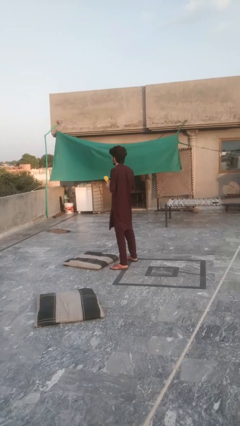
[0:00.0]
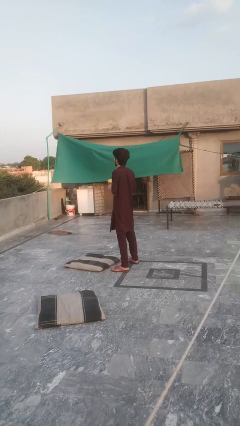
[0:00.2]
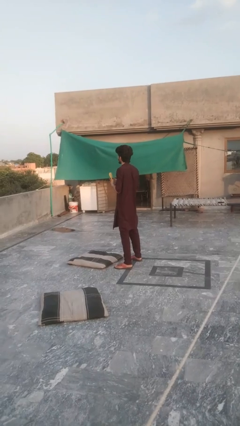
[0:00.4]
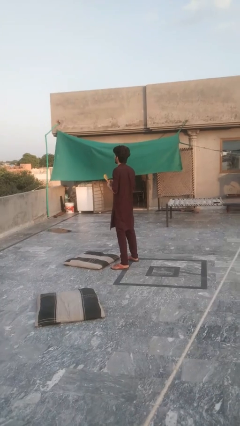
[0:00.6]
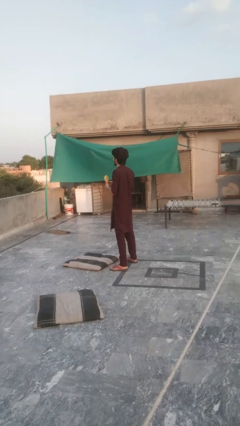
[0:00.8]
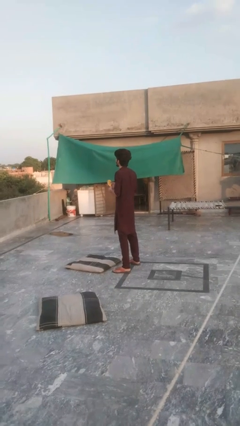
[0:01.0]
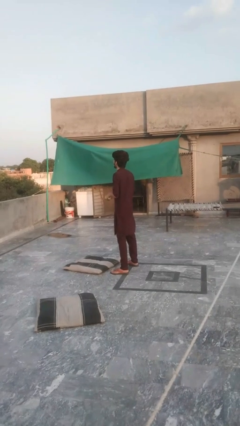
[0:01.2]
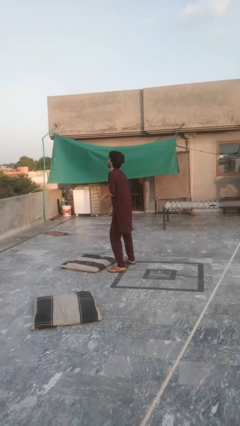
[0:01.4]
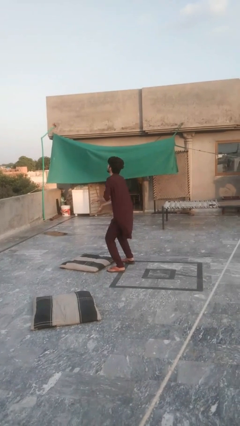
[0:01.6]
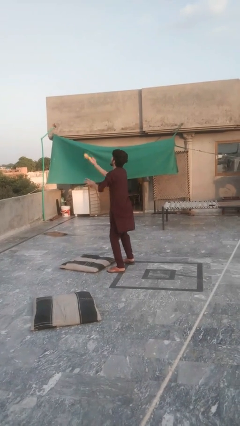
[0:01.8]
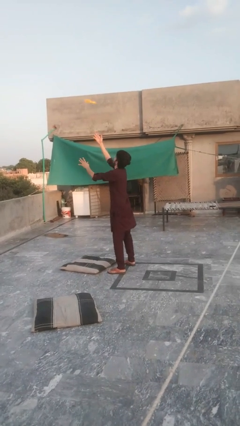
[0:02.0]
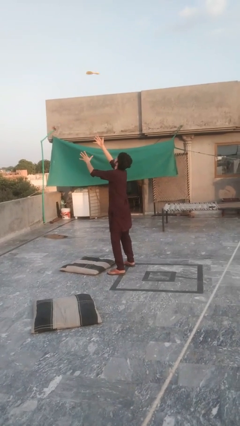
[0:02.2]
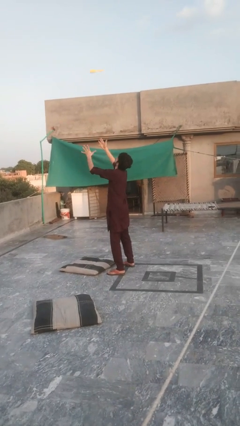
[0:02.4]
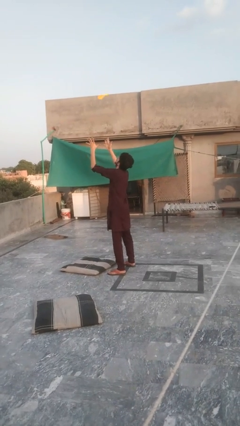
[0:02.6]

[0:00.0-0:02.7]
person drops object

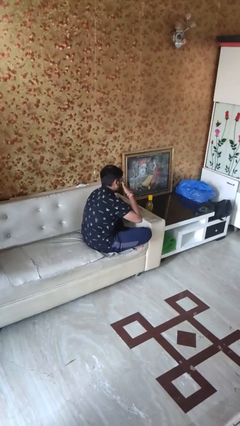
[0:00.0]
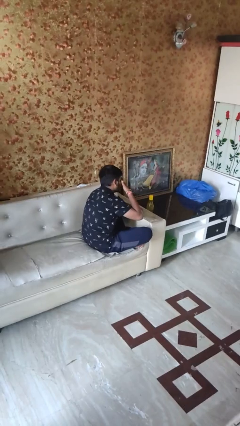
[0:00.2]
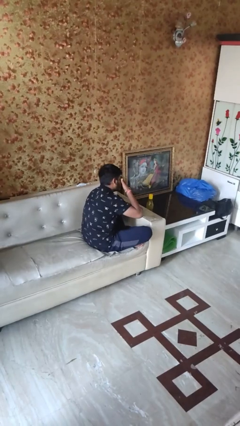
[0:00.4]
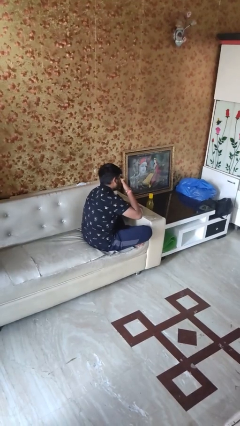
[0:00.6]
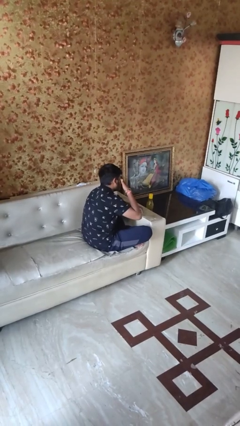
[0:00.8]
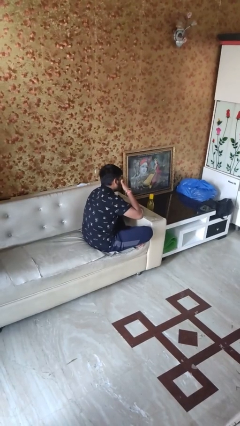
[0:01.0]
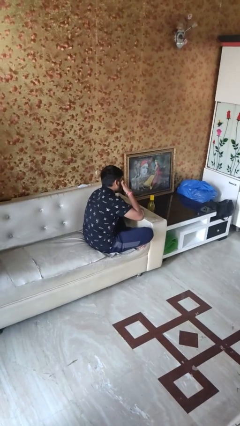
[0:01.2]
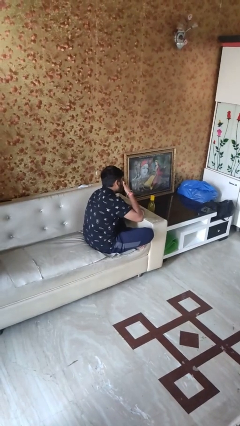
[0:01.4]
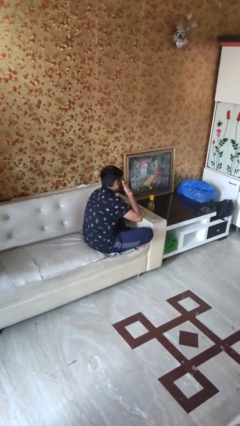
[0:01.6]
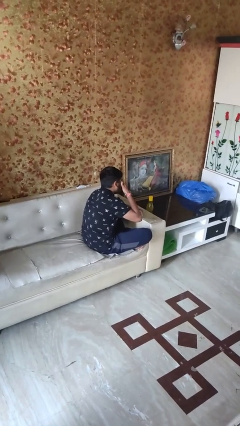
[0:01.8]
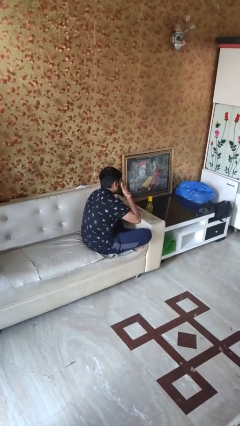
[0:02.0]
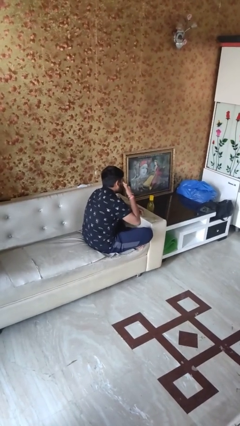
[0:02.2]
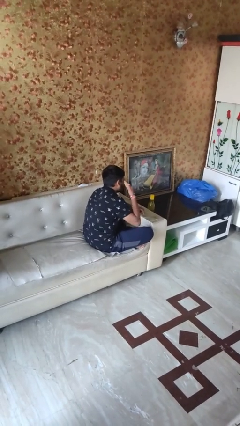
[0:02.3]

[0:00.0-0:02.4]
person rubs eyes

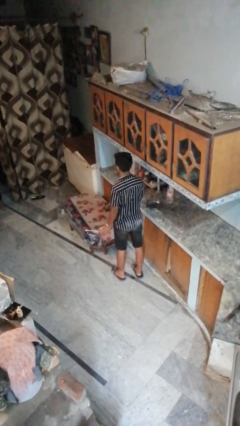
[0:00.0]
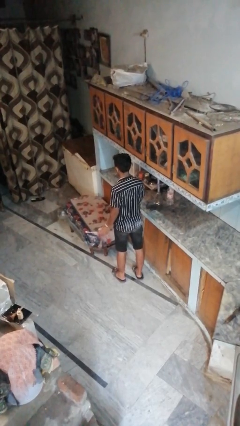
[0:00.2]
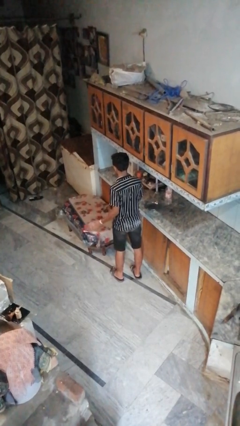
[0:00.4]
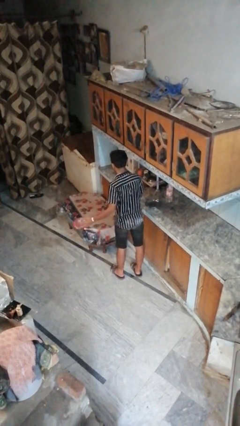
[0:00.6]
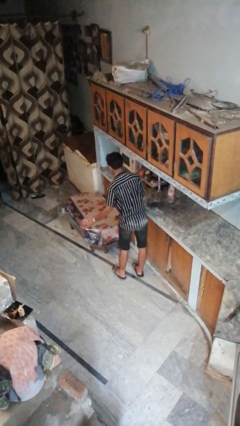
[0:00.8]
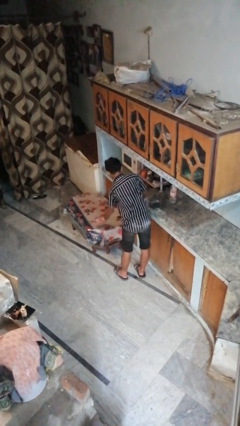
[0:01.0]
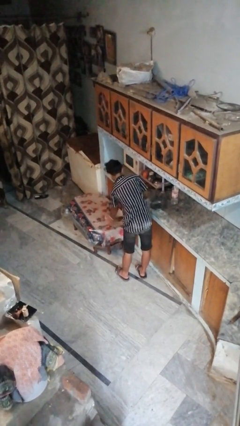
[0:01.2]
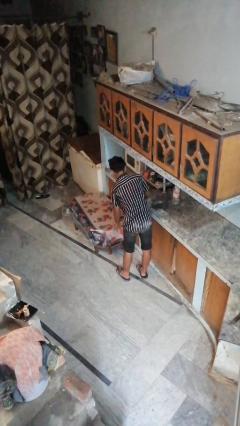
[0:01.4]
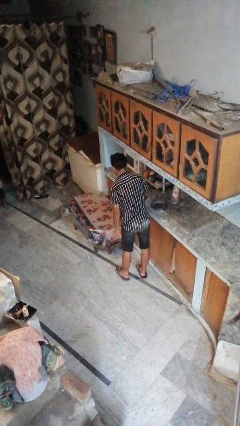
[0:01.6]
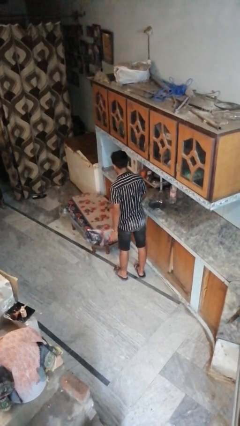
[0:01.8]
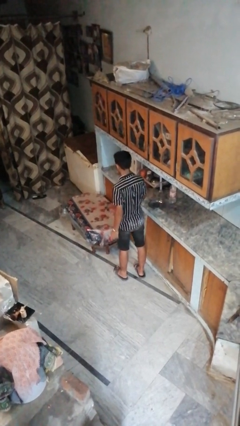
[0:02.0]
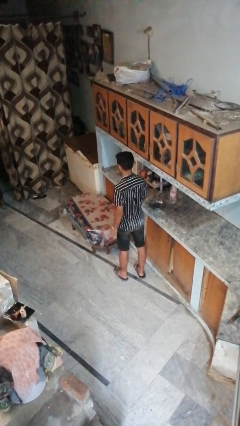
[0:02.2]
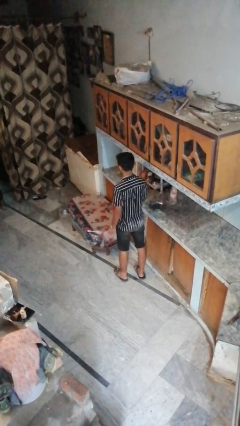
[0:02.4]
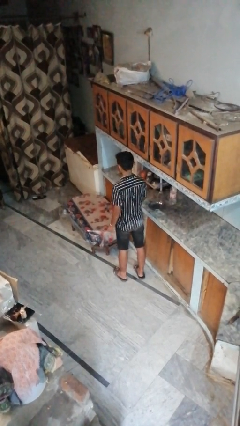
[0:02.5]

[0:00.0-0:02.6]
person throws object on table

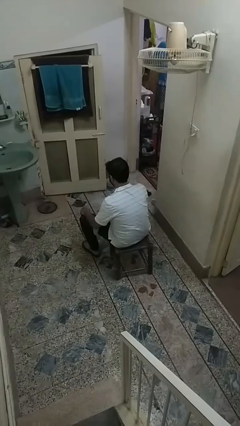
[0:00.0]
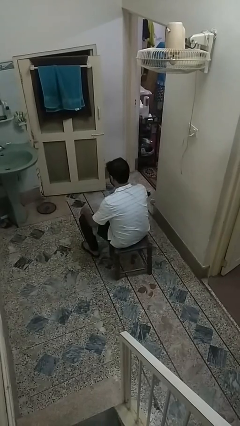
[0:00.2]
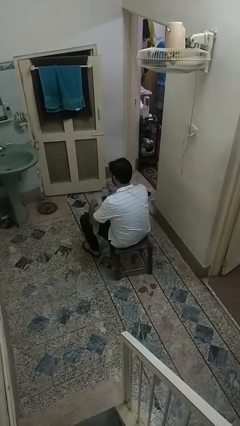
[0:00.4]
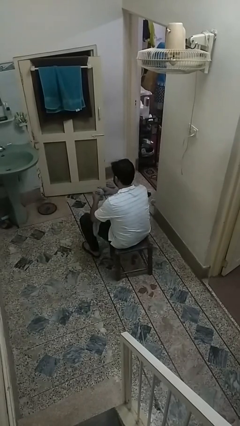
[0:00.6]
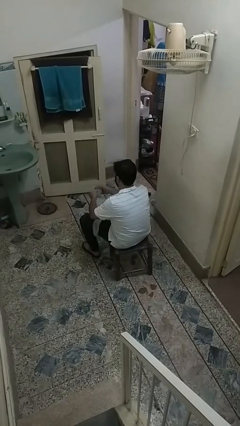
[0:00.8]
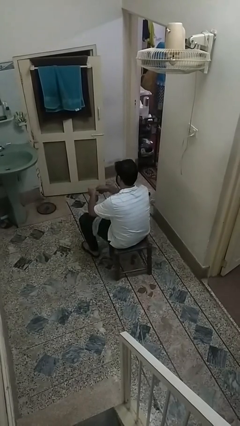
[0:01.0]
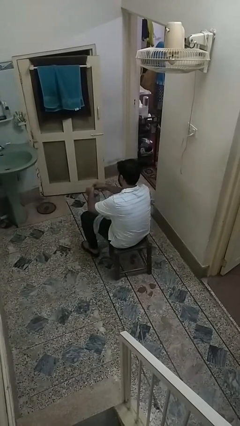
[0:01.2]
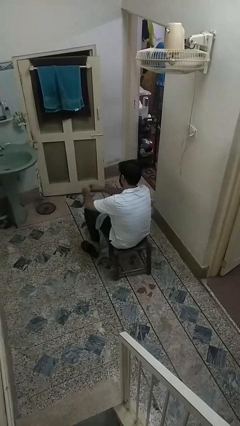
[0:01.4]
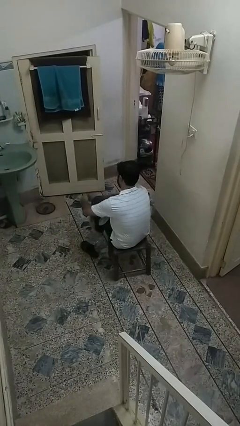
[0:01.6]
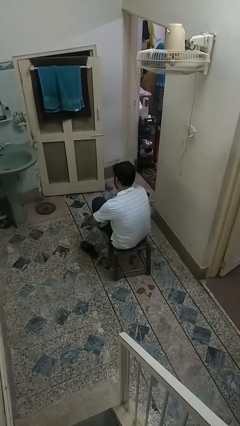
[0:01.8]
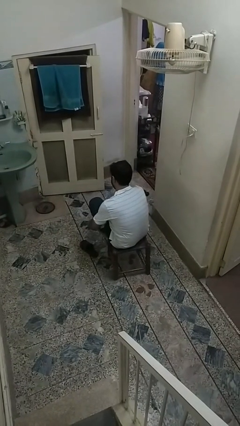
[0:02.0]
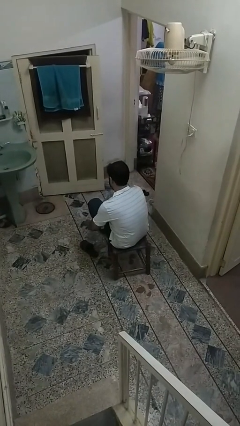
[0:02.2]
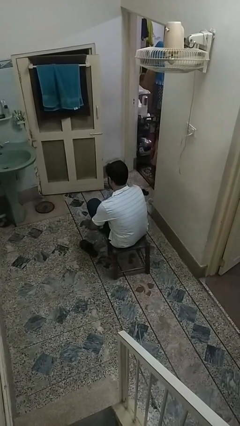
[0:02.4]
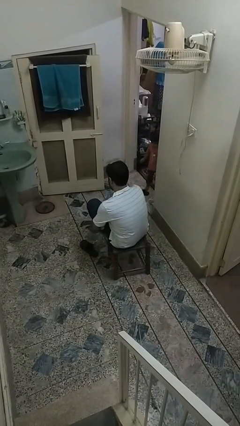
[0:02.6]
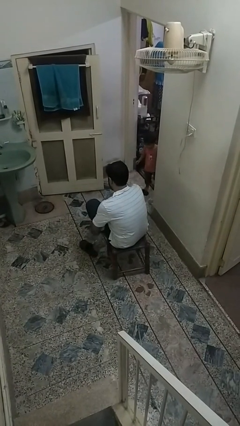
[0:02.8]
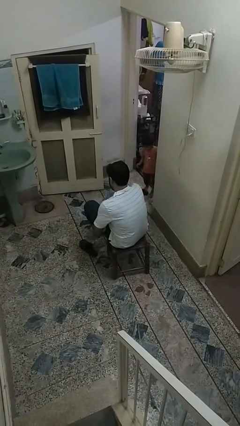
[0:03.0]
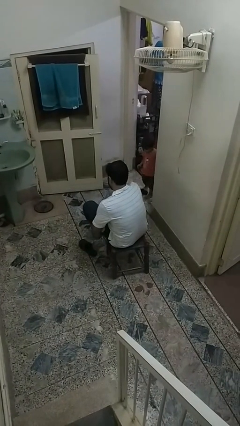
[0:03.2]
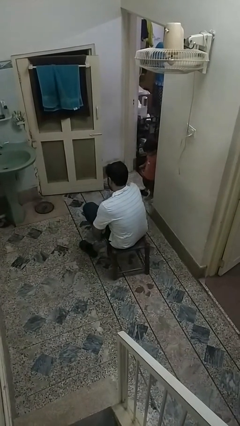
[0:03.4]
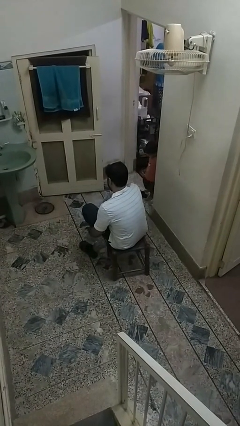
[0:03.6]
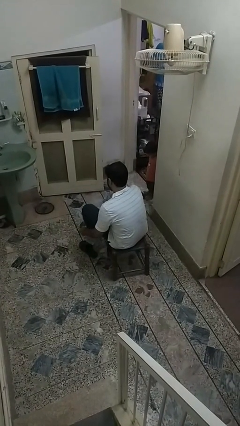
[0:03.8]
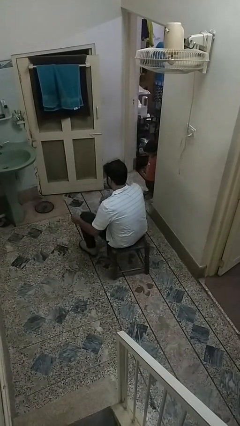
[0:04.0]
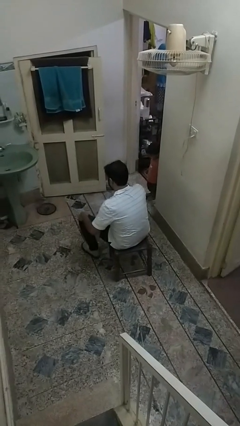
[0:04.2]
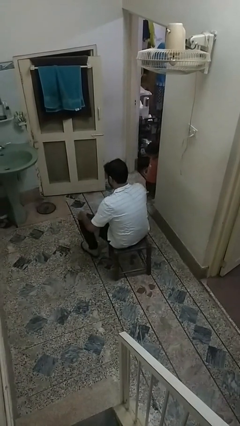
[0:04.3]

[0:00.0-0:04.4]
person puts on socks

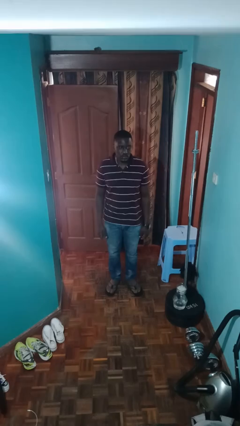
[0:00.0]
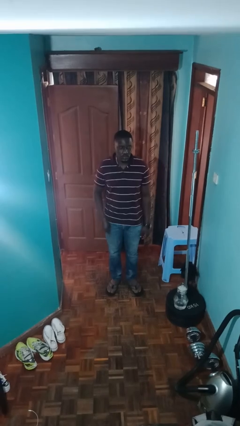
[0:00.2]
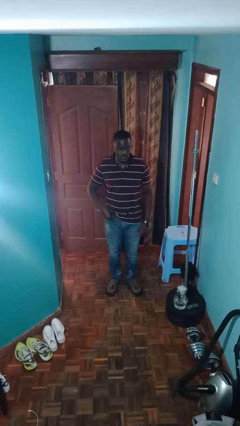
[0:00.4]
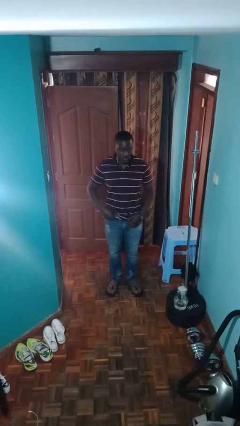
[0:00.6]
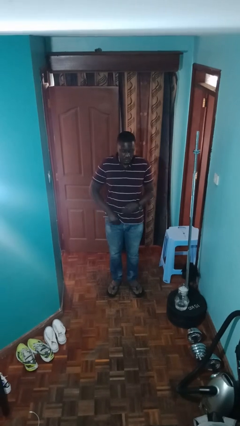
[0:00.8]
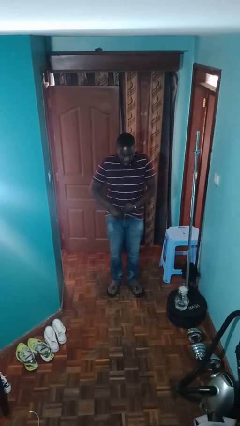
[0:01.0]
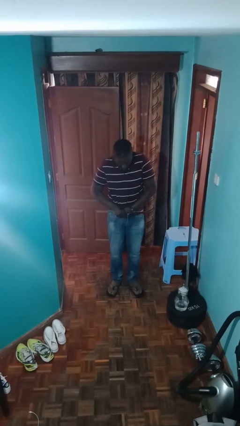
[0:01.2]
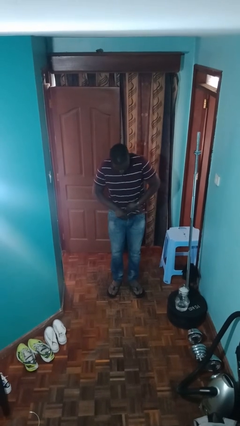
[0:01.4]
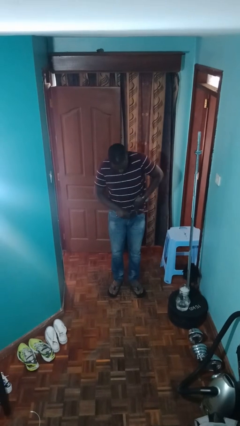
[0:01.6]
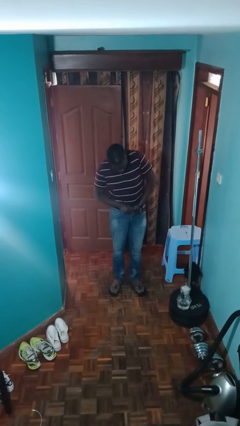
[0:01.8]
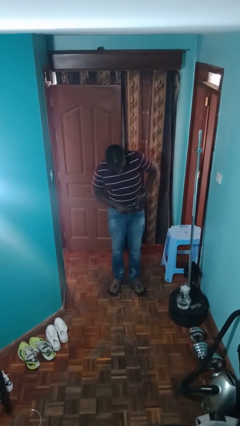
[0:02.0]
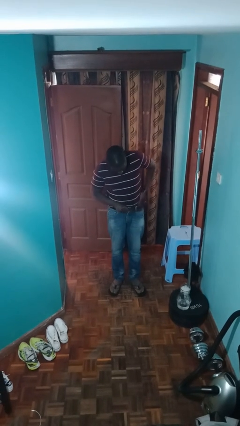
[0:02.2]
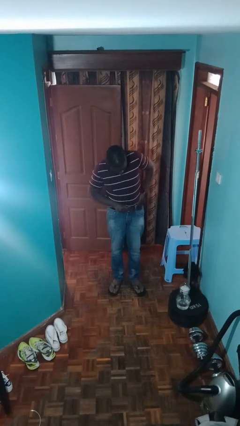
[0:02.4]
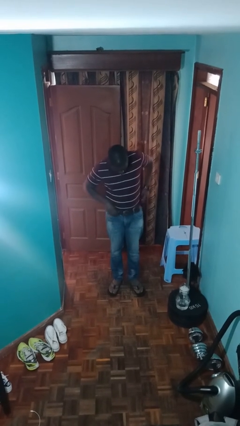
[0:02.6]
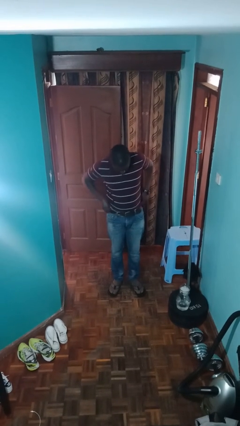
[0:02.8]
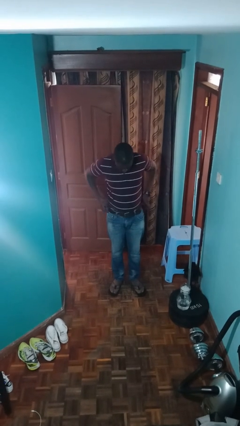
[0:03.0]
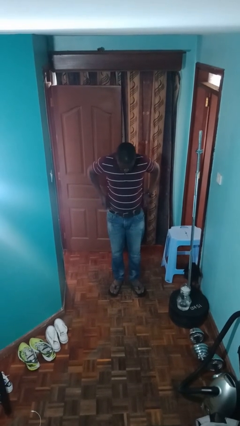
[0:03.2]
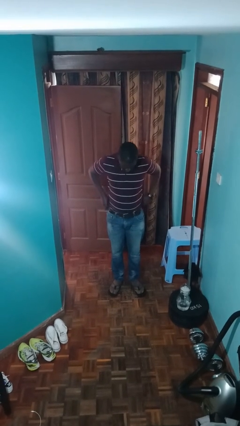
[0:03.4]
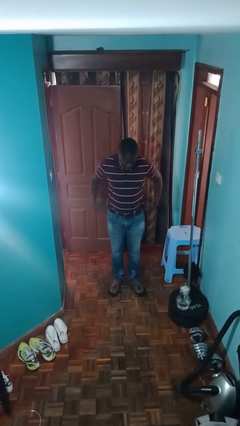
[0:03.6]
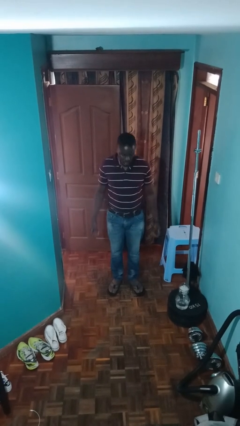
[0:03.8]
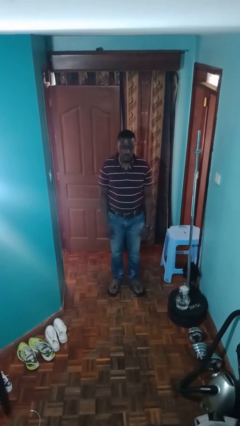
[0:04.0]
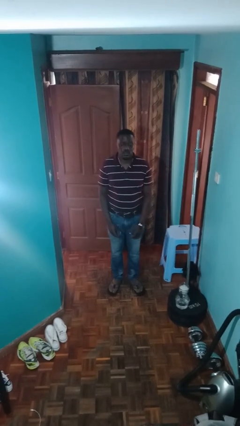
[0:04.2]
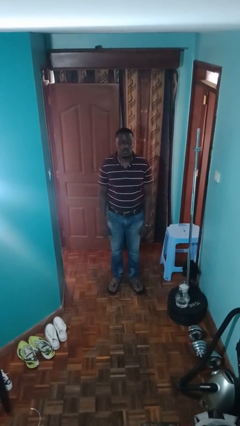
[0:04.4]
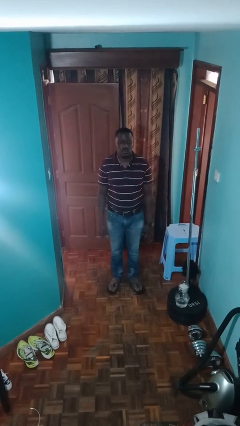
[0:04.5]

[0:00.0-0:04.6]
person tucks in shirt

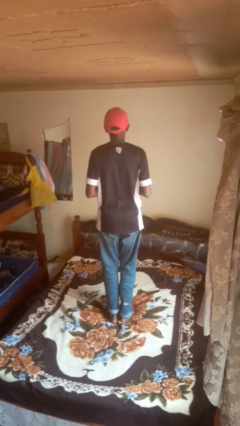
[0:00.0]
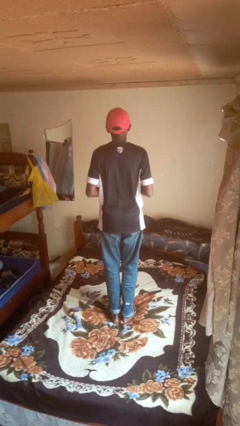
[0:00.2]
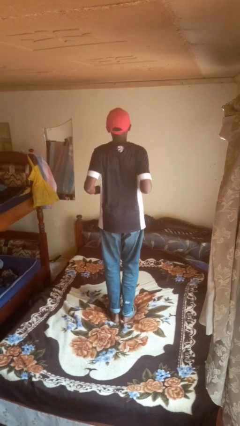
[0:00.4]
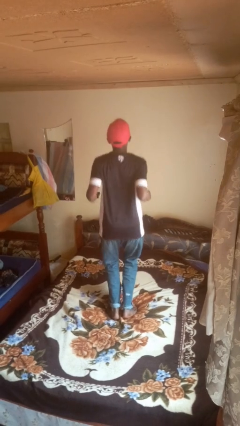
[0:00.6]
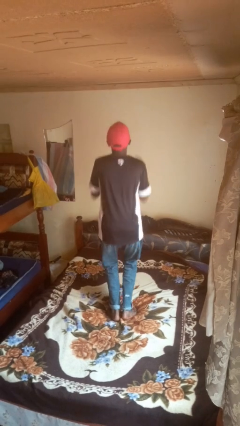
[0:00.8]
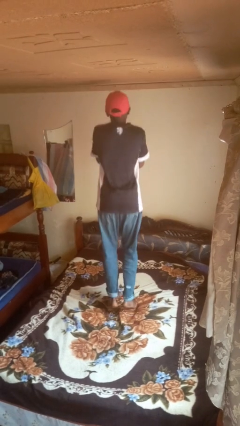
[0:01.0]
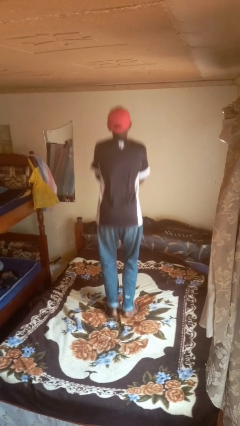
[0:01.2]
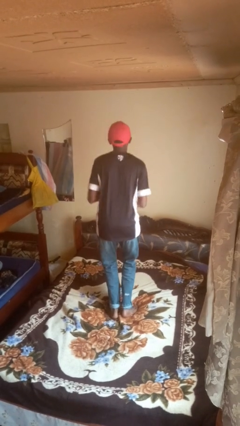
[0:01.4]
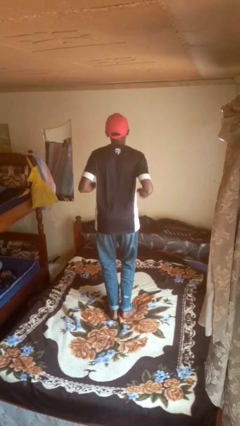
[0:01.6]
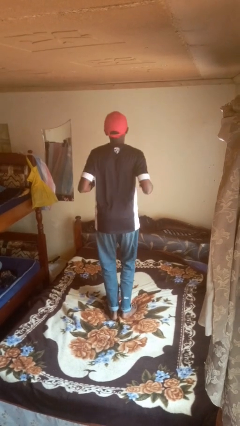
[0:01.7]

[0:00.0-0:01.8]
person jumps on bed
